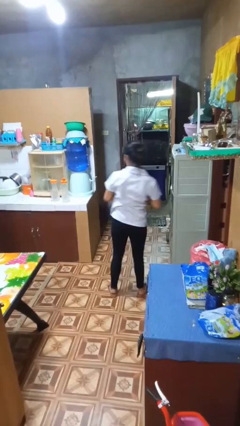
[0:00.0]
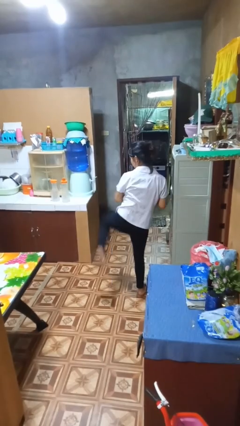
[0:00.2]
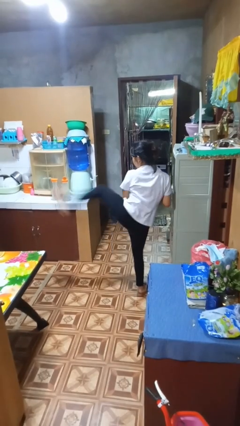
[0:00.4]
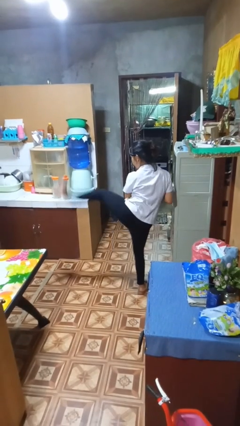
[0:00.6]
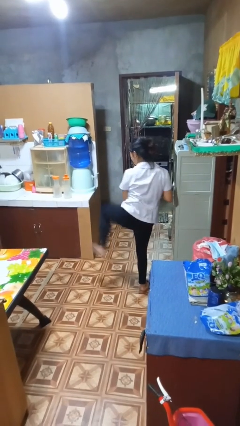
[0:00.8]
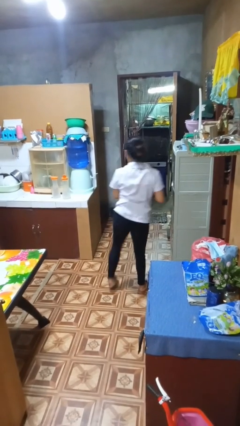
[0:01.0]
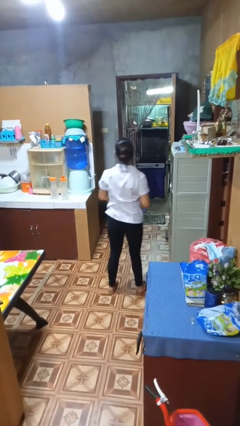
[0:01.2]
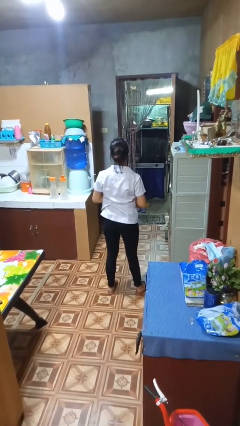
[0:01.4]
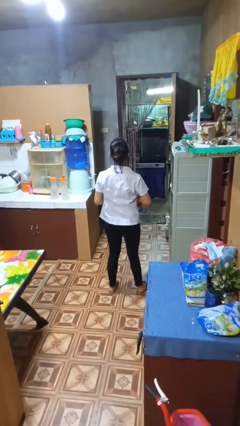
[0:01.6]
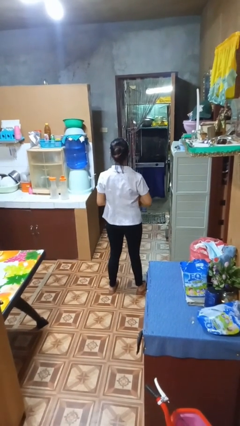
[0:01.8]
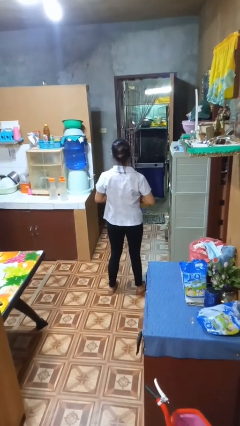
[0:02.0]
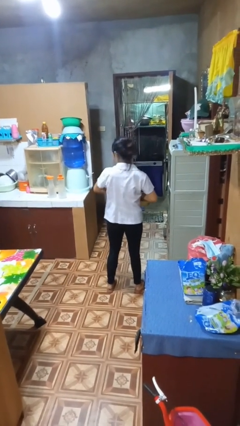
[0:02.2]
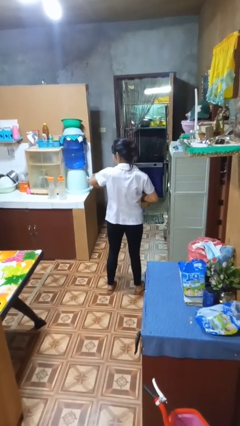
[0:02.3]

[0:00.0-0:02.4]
person karate kicks

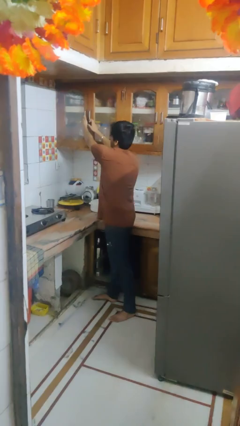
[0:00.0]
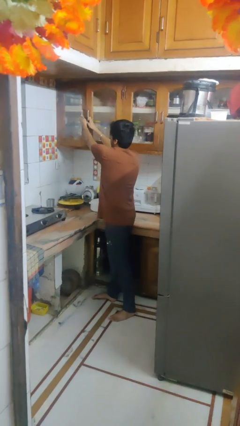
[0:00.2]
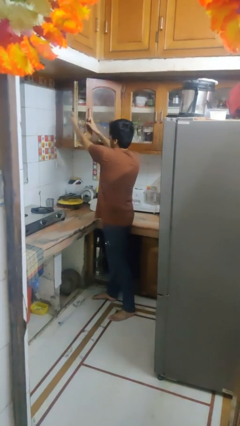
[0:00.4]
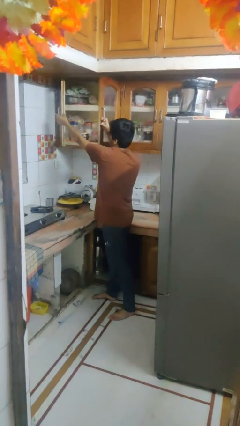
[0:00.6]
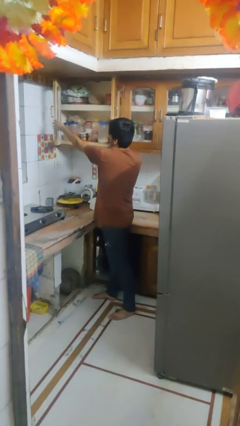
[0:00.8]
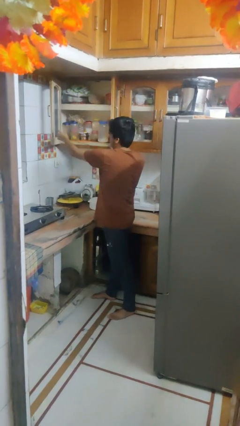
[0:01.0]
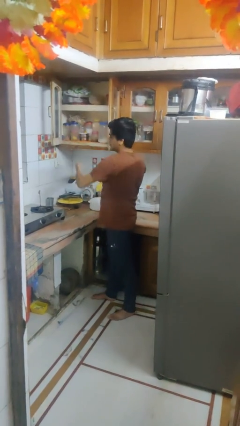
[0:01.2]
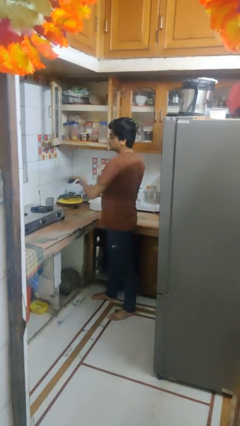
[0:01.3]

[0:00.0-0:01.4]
person opens cabinet

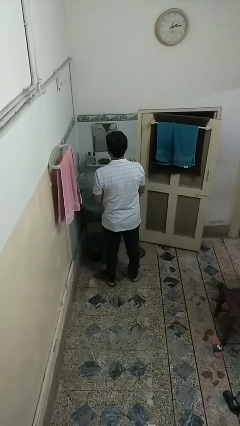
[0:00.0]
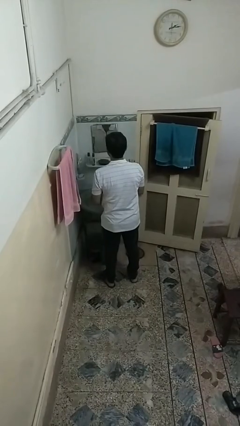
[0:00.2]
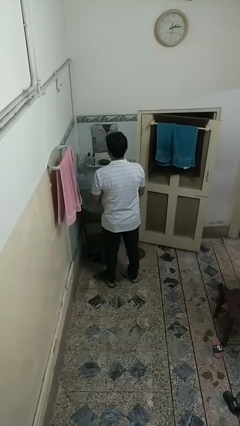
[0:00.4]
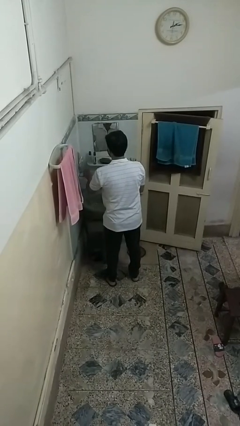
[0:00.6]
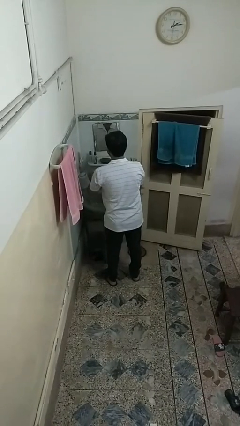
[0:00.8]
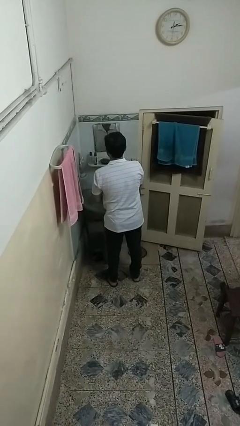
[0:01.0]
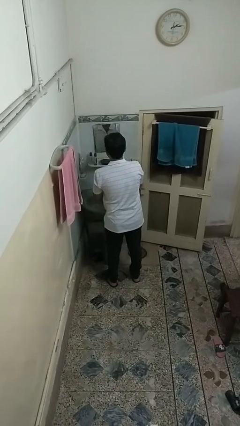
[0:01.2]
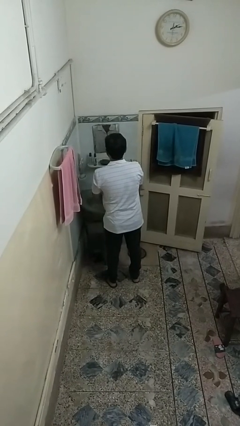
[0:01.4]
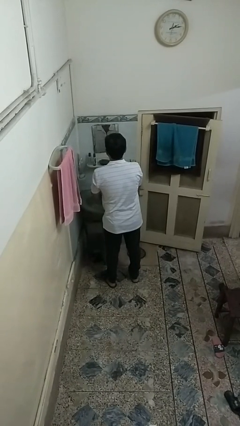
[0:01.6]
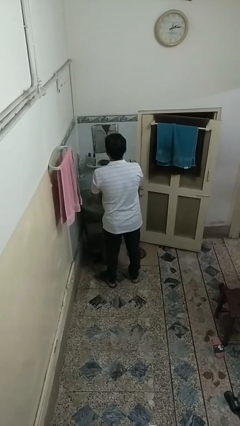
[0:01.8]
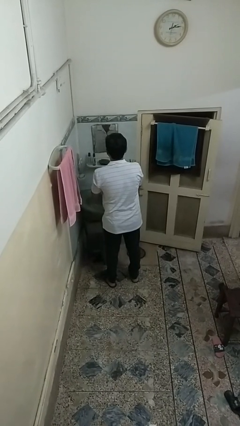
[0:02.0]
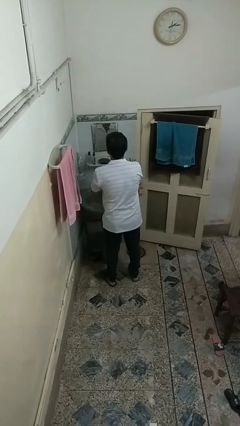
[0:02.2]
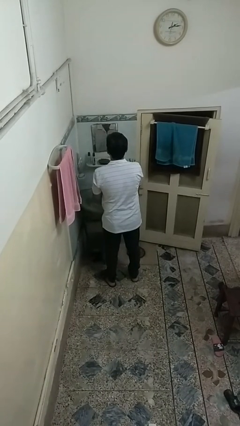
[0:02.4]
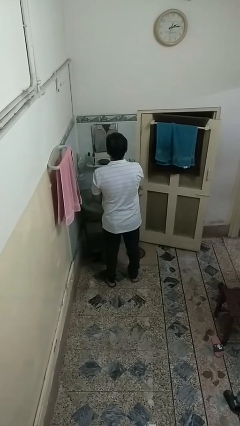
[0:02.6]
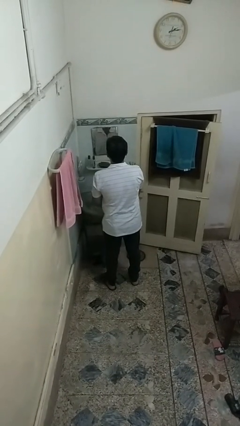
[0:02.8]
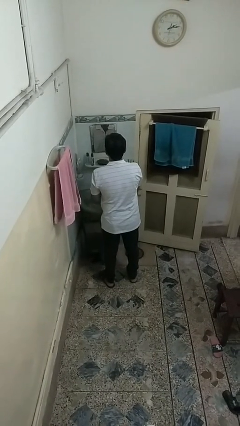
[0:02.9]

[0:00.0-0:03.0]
person washes hands

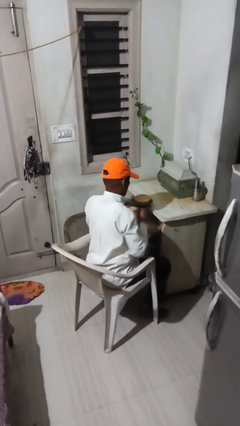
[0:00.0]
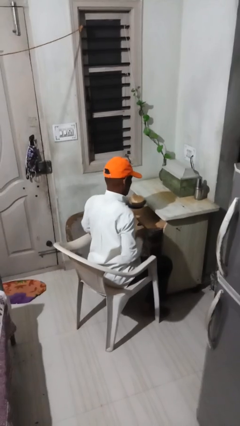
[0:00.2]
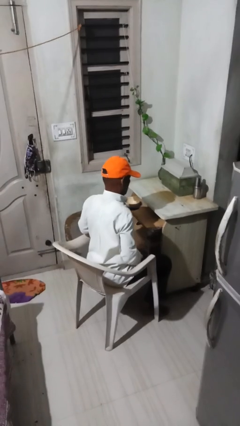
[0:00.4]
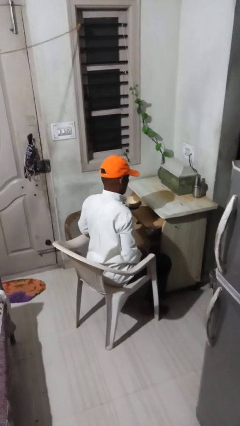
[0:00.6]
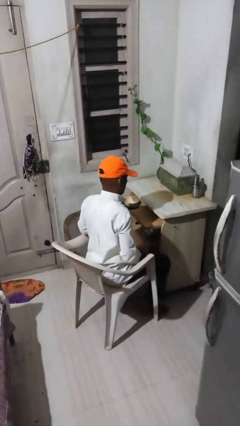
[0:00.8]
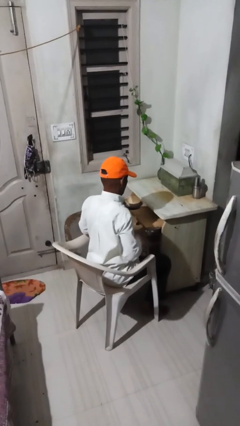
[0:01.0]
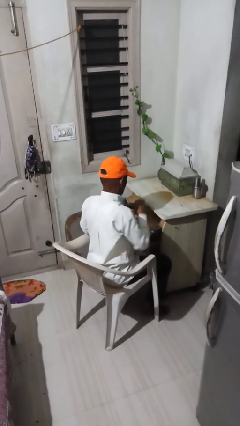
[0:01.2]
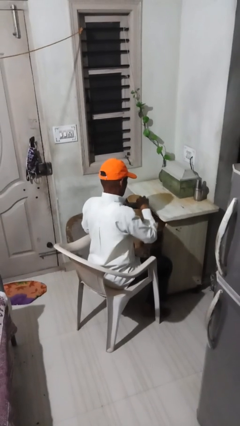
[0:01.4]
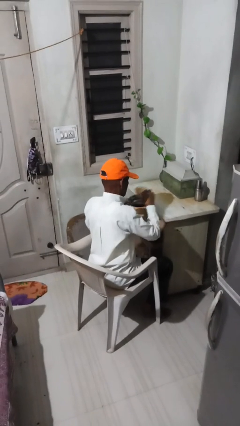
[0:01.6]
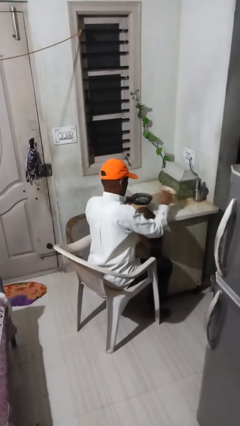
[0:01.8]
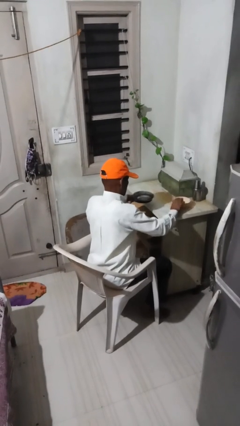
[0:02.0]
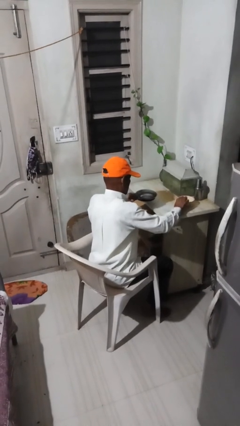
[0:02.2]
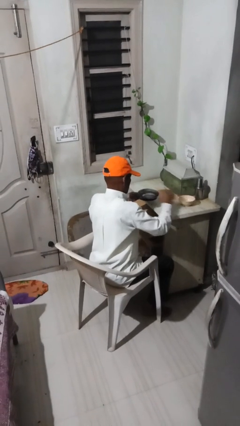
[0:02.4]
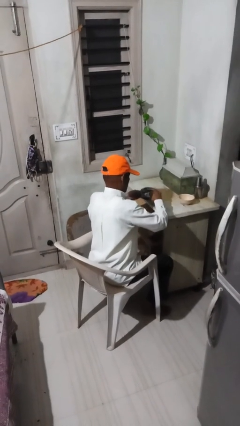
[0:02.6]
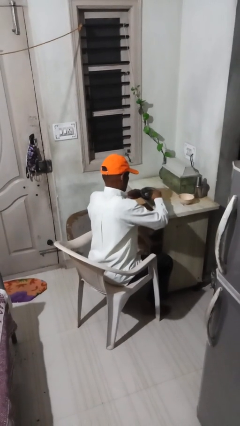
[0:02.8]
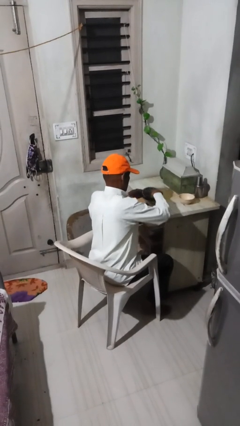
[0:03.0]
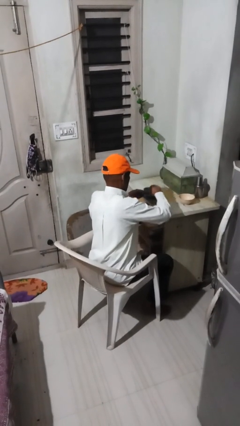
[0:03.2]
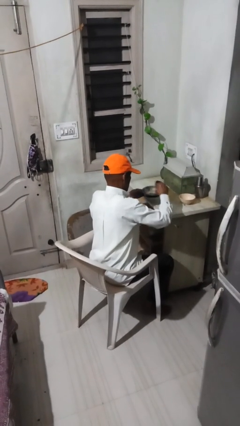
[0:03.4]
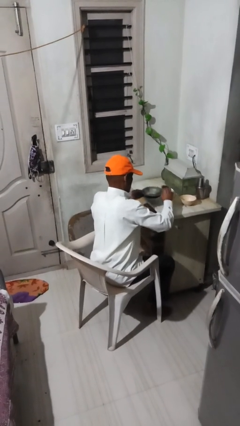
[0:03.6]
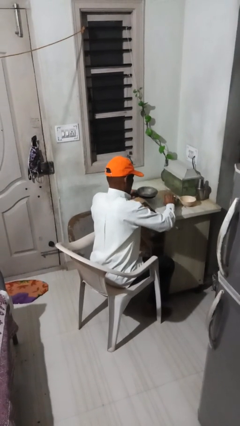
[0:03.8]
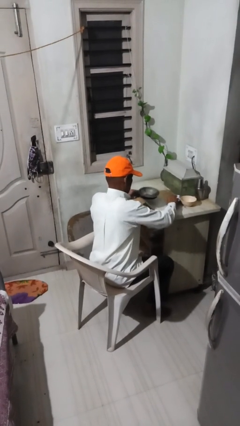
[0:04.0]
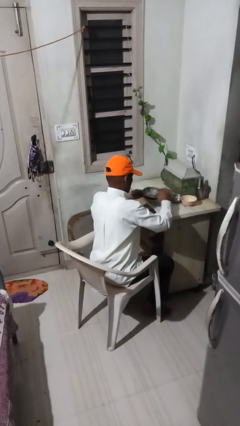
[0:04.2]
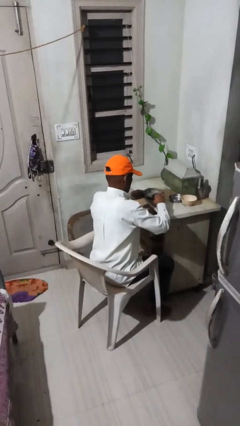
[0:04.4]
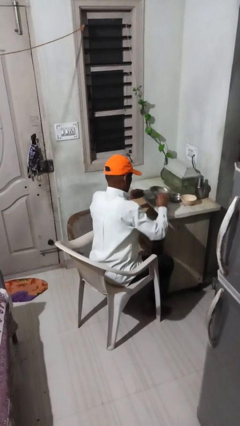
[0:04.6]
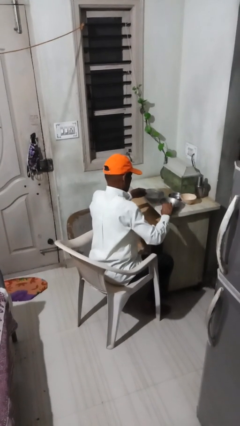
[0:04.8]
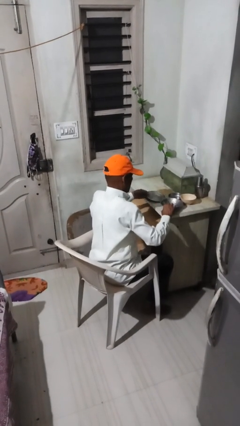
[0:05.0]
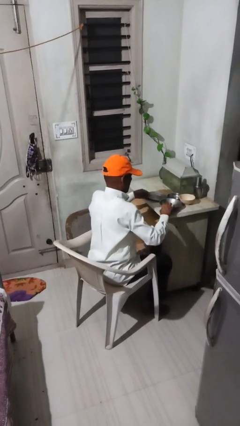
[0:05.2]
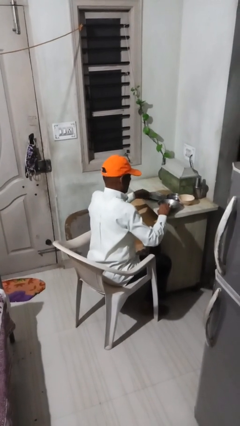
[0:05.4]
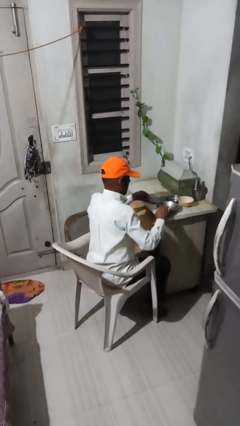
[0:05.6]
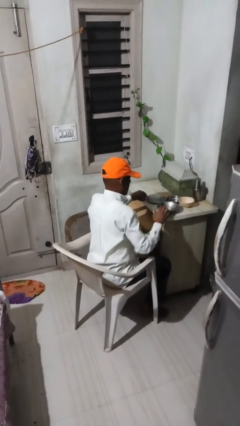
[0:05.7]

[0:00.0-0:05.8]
person sets table

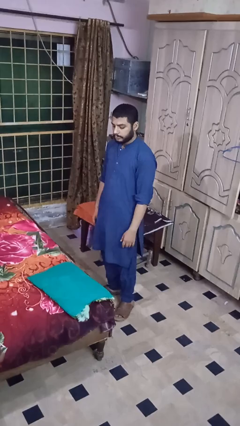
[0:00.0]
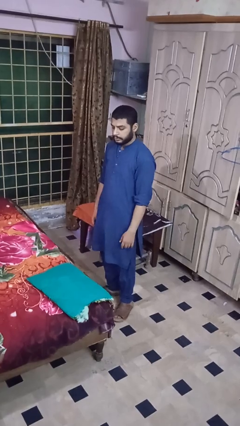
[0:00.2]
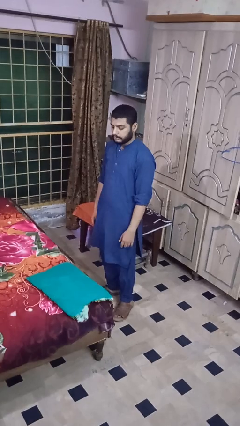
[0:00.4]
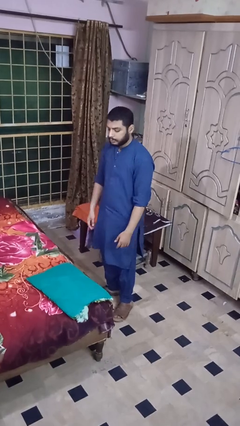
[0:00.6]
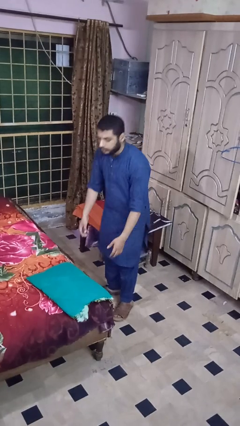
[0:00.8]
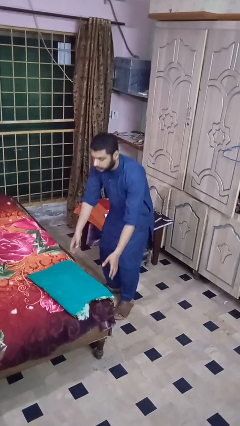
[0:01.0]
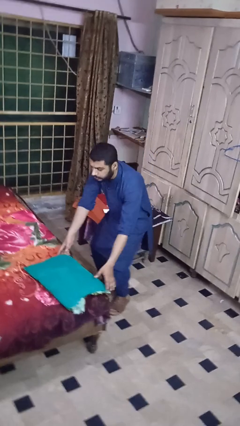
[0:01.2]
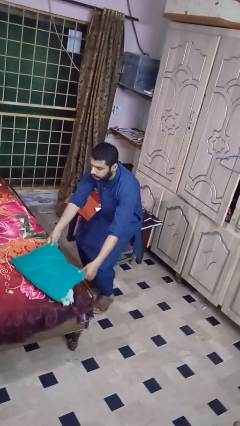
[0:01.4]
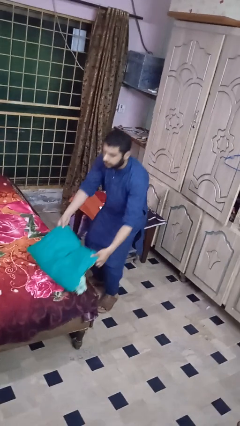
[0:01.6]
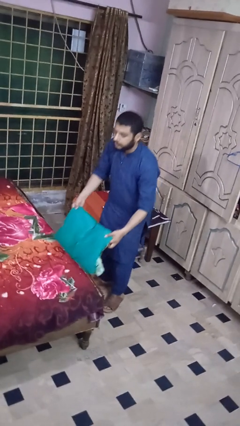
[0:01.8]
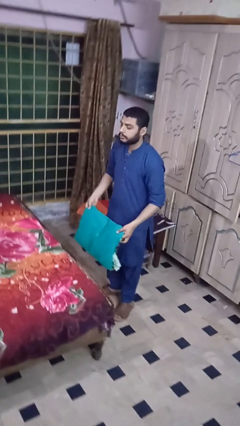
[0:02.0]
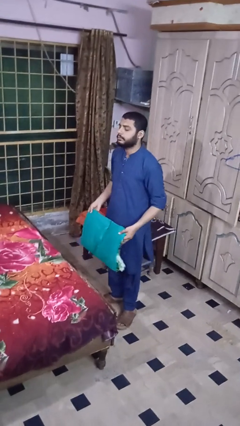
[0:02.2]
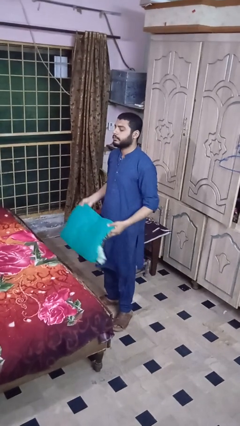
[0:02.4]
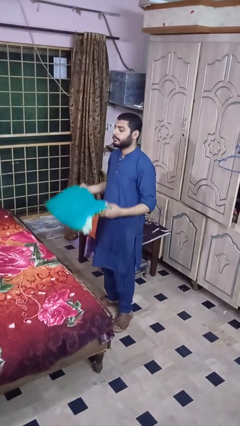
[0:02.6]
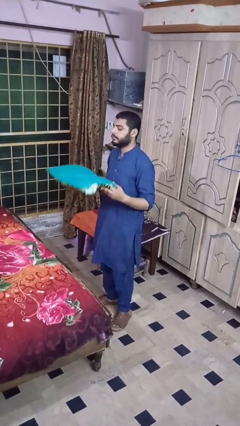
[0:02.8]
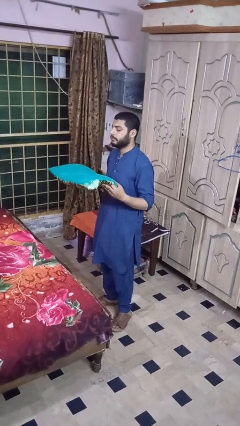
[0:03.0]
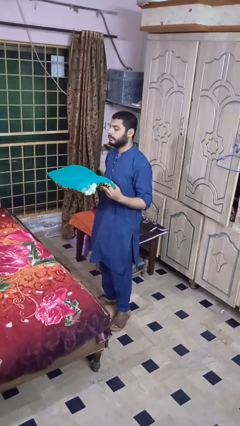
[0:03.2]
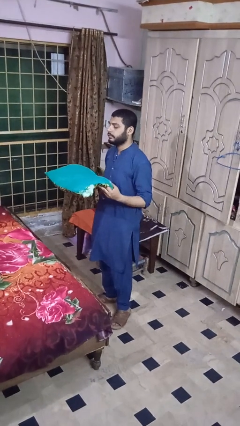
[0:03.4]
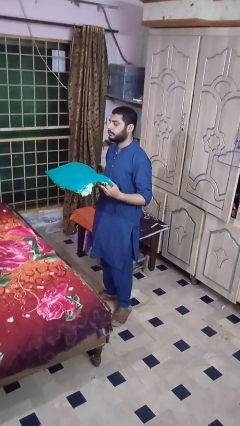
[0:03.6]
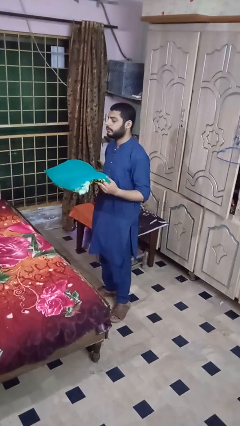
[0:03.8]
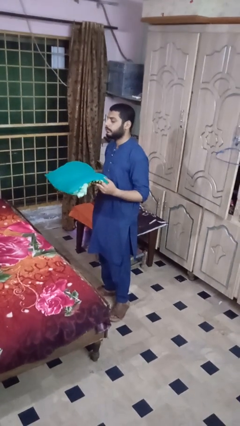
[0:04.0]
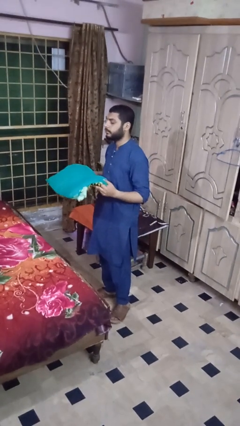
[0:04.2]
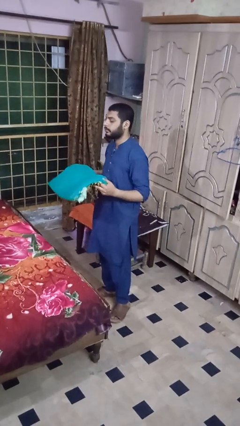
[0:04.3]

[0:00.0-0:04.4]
person picks up object from bed

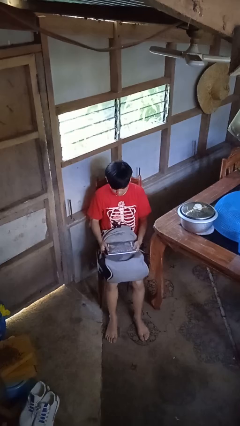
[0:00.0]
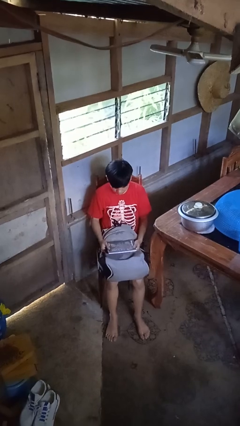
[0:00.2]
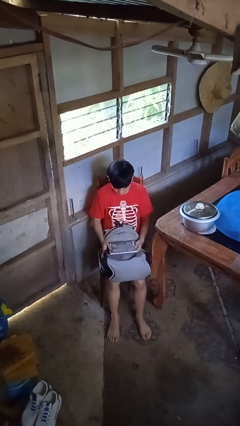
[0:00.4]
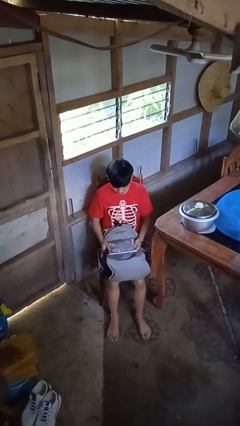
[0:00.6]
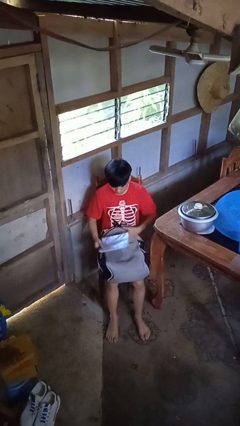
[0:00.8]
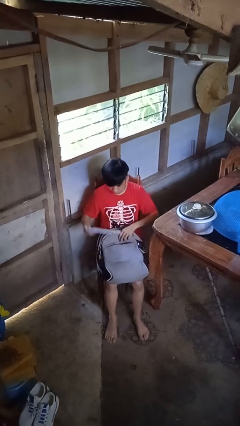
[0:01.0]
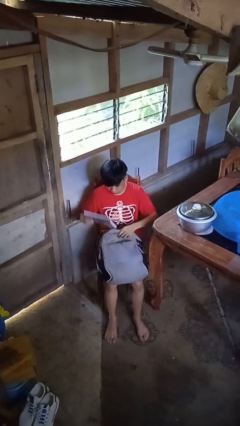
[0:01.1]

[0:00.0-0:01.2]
person puts object into backpack
